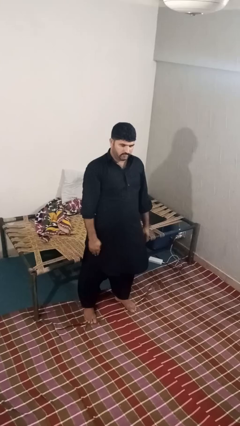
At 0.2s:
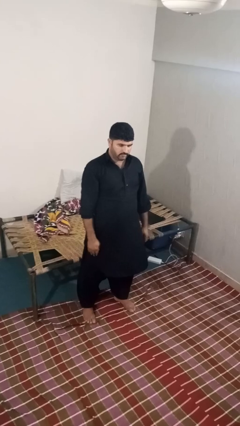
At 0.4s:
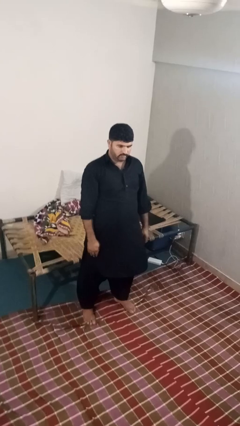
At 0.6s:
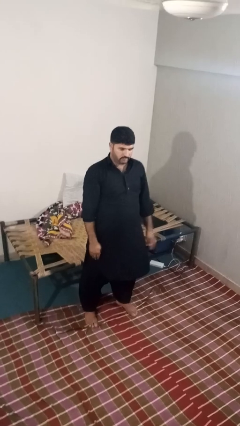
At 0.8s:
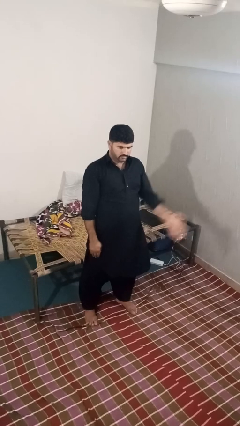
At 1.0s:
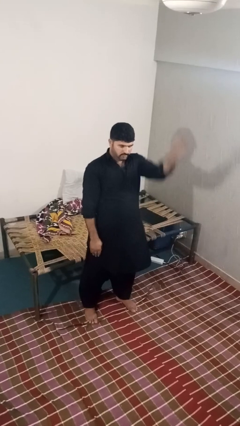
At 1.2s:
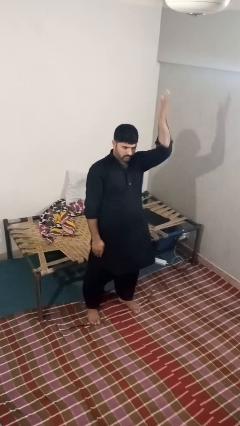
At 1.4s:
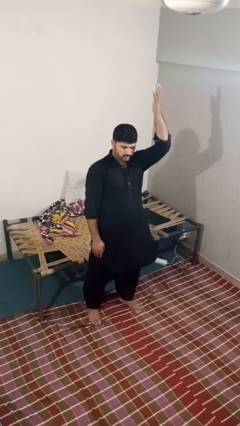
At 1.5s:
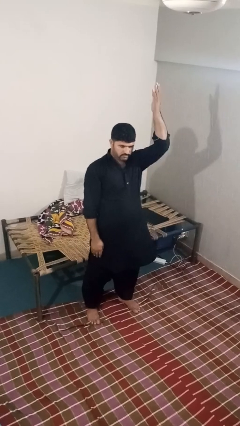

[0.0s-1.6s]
person gestures swipe up

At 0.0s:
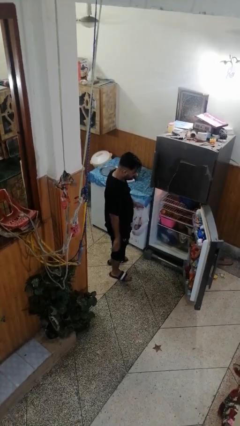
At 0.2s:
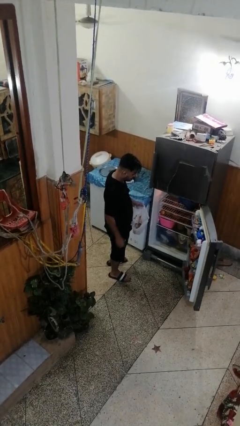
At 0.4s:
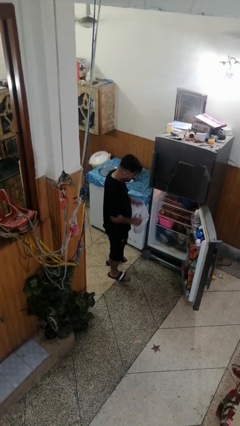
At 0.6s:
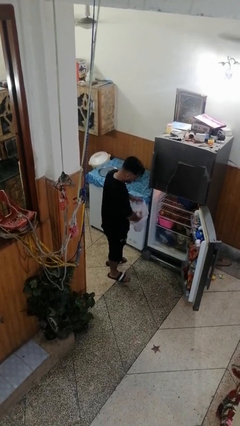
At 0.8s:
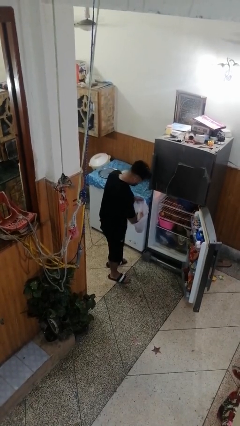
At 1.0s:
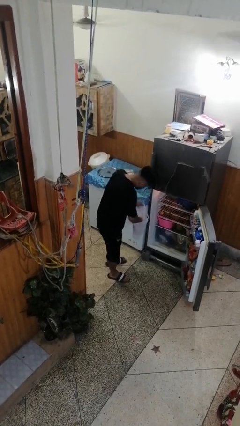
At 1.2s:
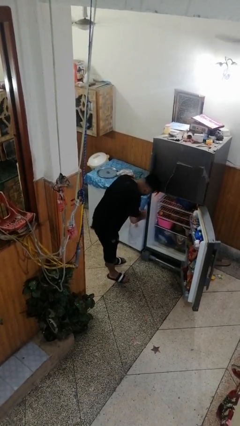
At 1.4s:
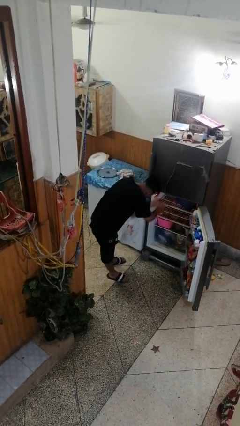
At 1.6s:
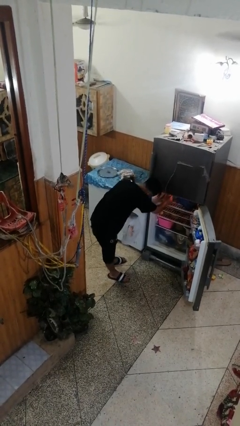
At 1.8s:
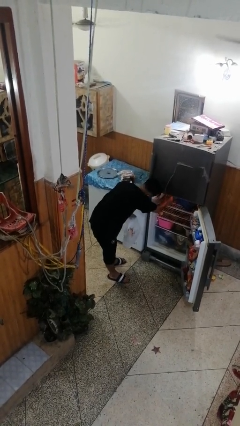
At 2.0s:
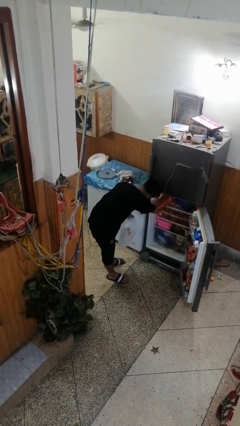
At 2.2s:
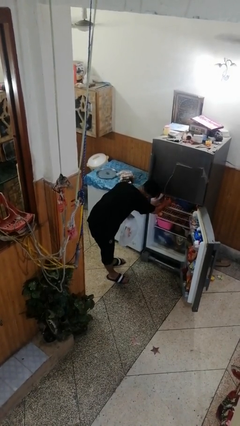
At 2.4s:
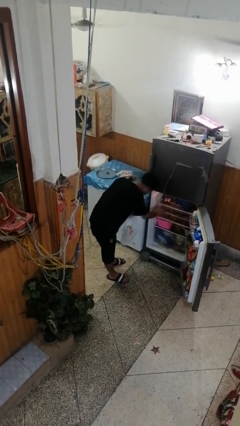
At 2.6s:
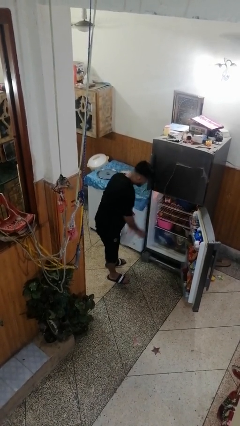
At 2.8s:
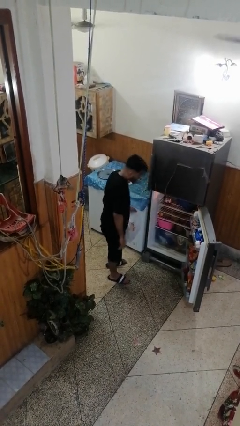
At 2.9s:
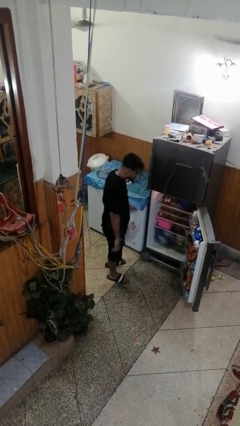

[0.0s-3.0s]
person loads groceries into refrigerator

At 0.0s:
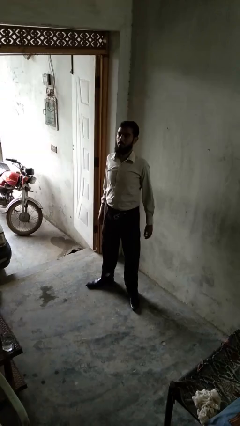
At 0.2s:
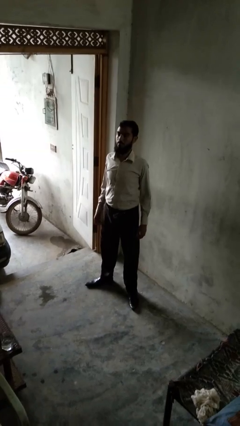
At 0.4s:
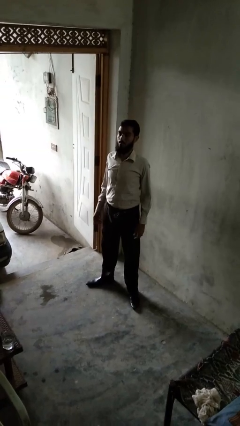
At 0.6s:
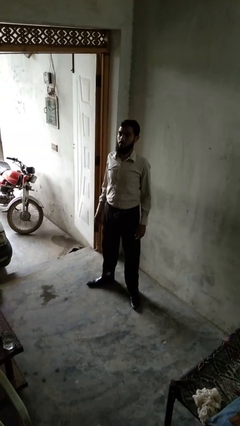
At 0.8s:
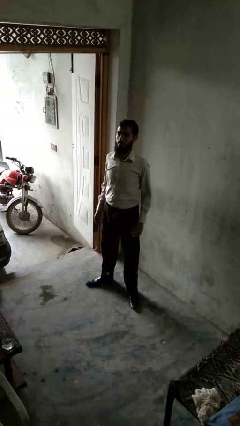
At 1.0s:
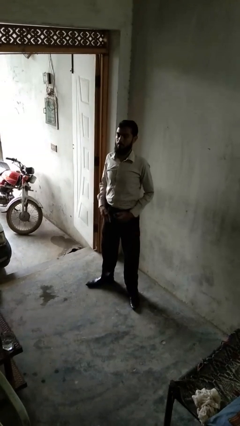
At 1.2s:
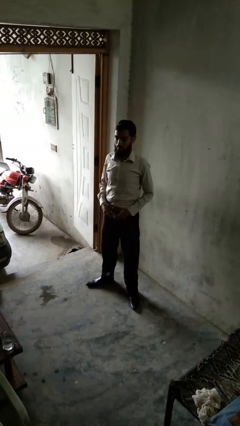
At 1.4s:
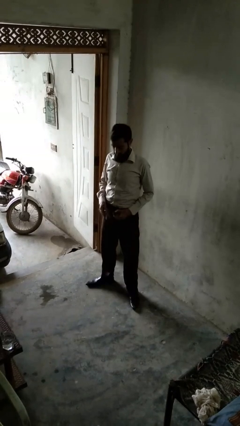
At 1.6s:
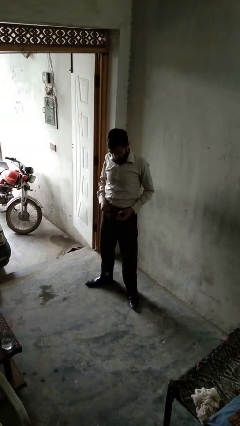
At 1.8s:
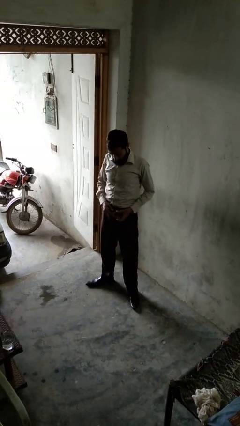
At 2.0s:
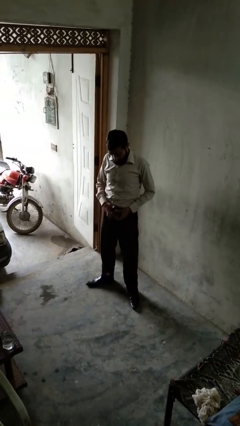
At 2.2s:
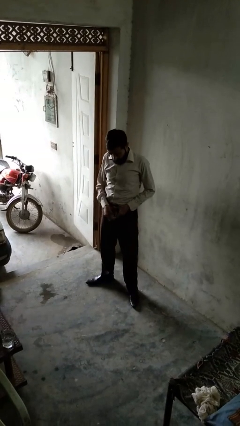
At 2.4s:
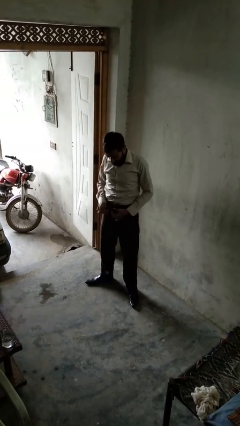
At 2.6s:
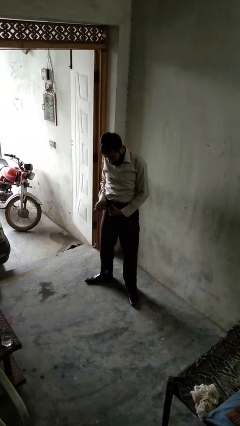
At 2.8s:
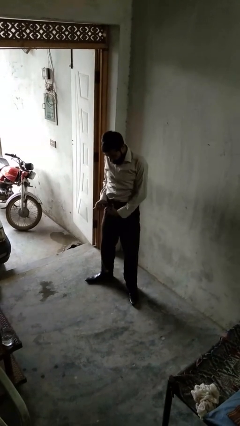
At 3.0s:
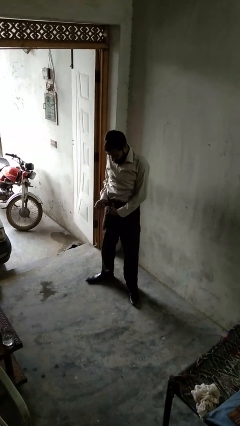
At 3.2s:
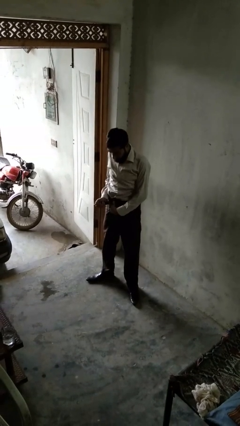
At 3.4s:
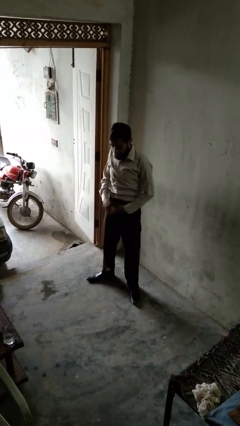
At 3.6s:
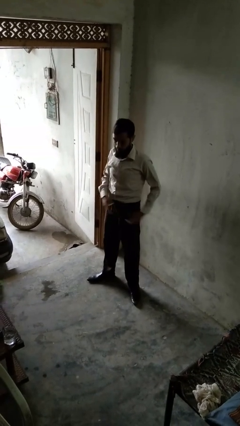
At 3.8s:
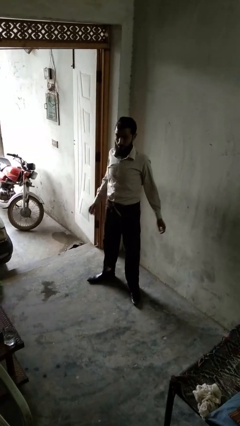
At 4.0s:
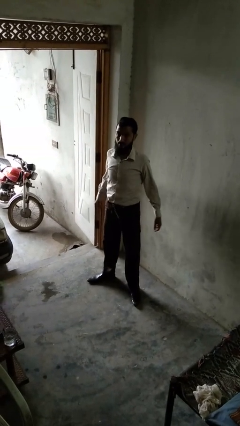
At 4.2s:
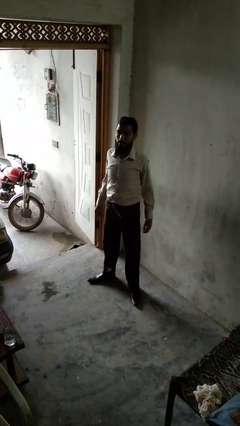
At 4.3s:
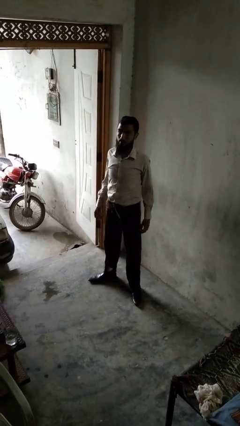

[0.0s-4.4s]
person puts on belt

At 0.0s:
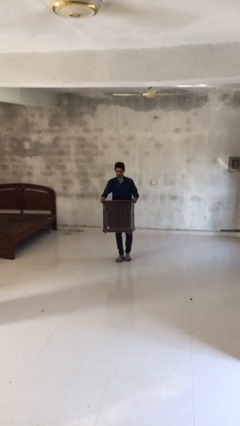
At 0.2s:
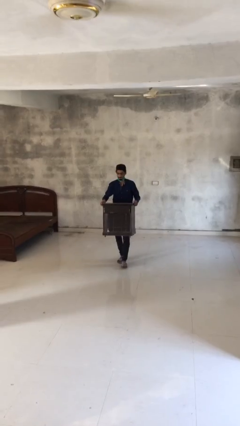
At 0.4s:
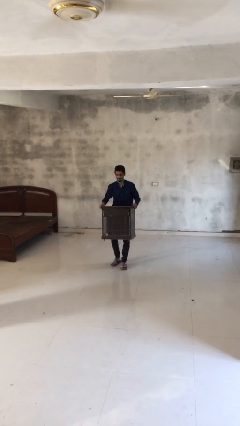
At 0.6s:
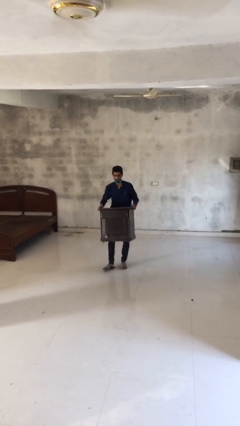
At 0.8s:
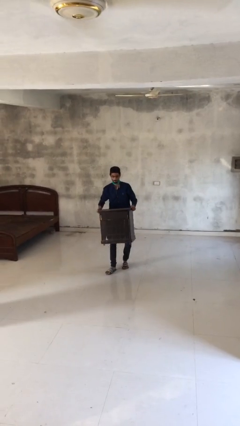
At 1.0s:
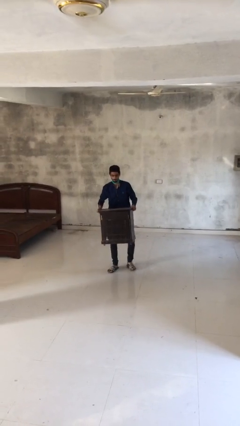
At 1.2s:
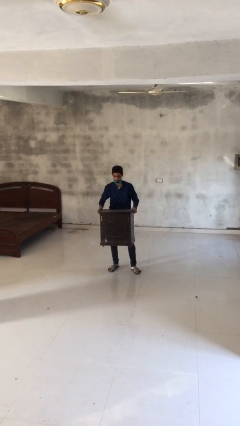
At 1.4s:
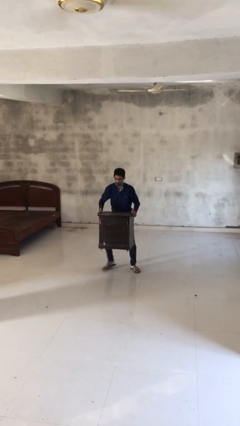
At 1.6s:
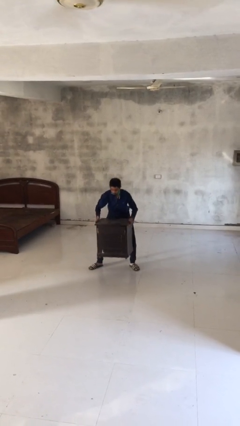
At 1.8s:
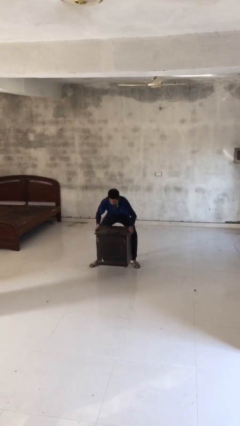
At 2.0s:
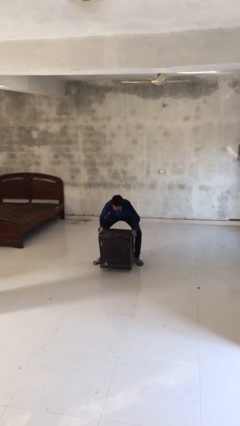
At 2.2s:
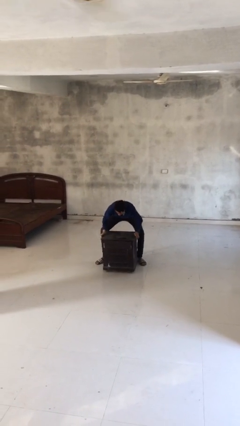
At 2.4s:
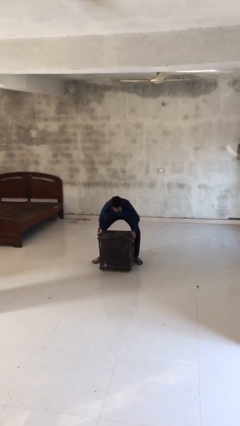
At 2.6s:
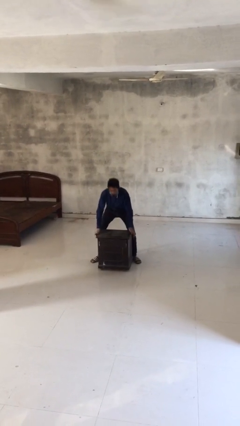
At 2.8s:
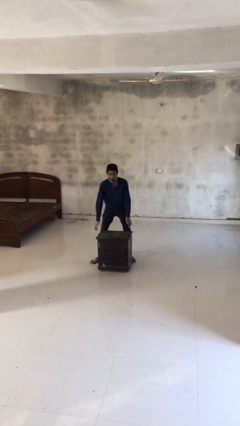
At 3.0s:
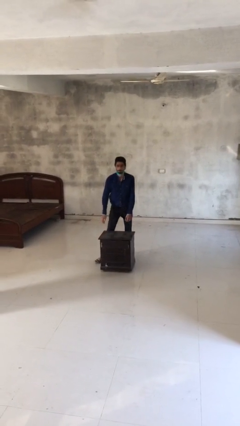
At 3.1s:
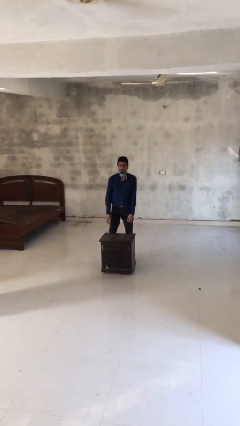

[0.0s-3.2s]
person puts down object on floor

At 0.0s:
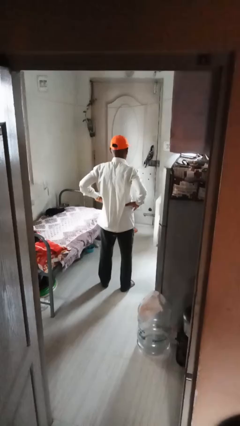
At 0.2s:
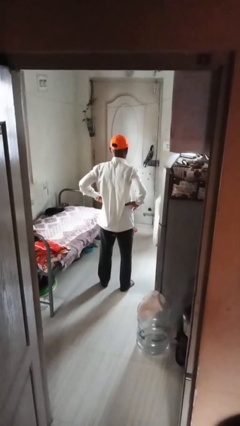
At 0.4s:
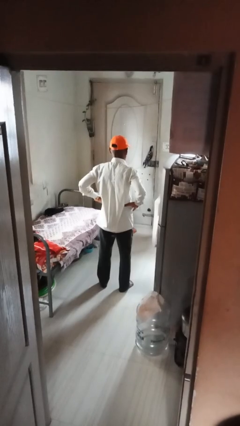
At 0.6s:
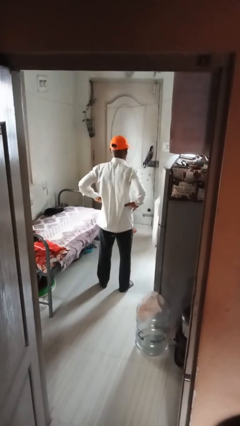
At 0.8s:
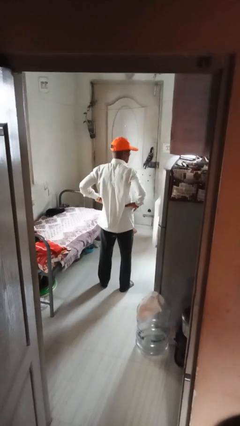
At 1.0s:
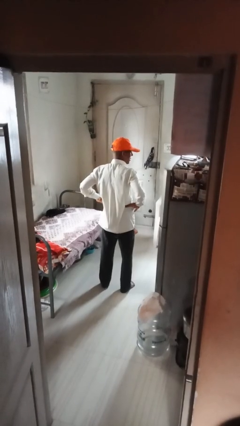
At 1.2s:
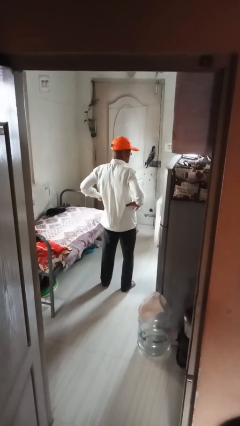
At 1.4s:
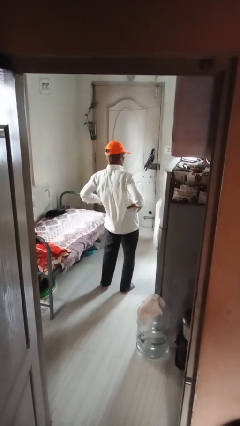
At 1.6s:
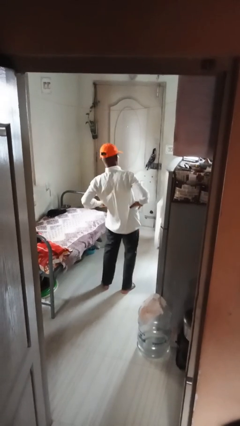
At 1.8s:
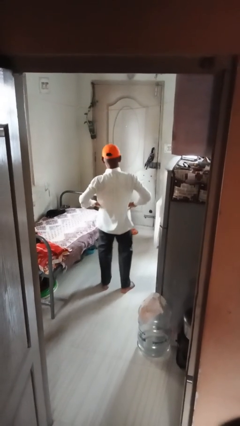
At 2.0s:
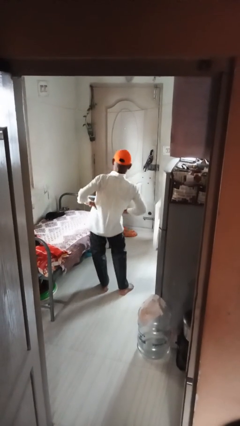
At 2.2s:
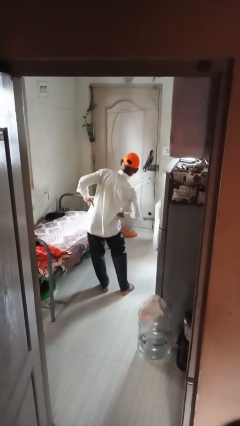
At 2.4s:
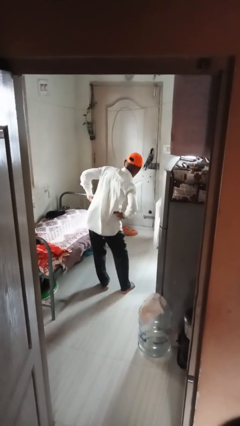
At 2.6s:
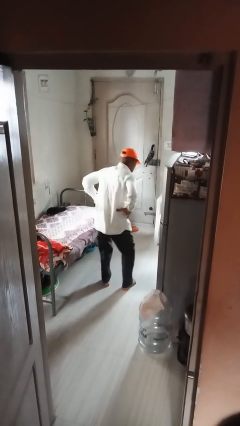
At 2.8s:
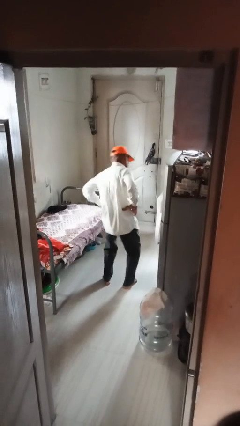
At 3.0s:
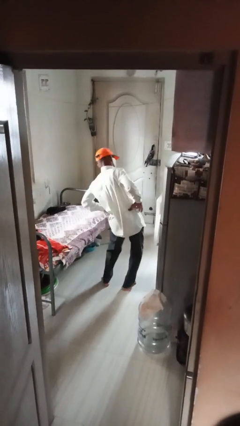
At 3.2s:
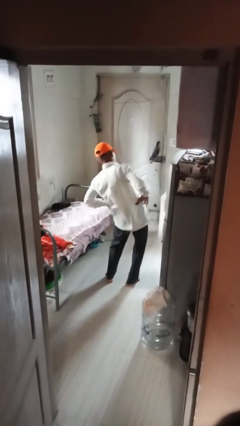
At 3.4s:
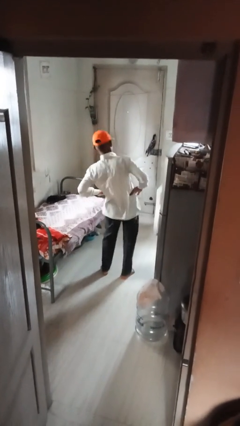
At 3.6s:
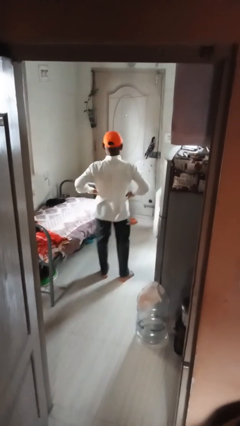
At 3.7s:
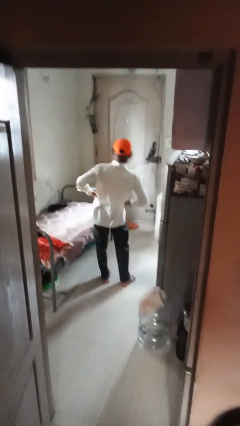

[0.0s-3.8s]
person wiggles hips

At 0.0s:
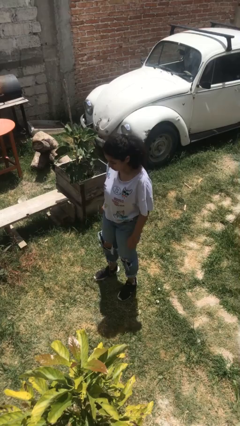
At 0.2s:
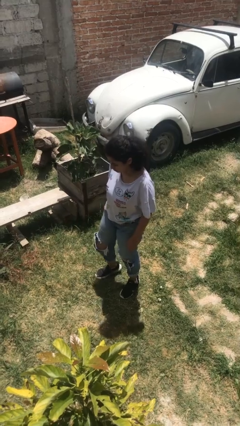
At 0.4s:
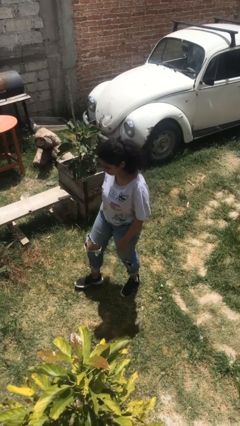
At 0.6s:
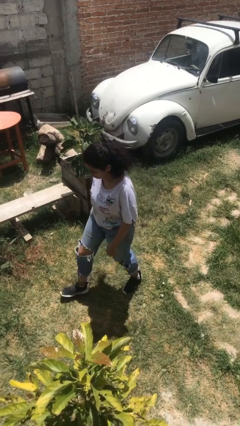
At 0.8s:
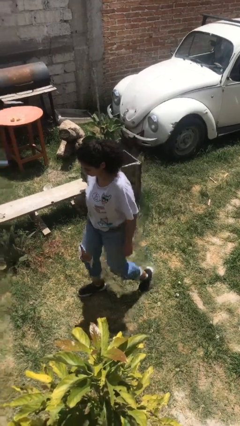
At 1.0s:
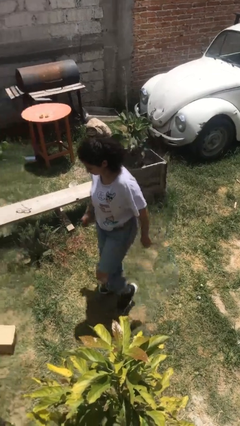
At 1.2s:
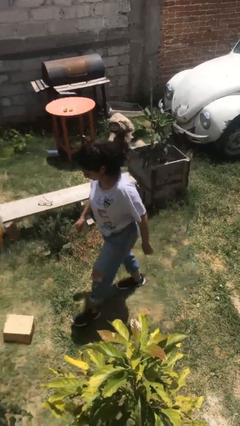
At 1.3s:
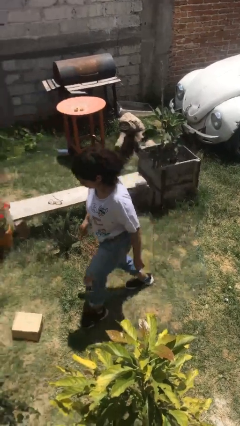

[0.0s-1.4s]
person trips on object on floor
